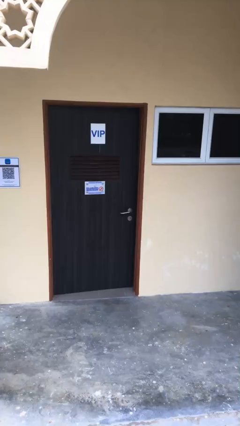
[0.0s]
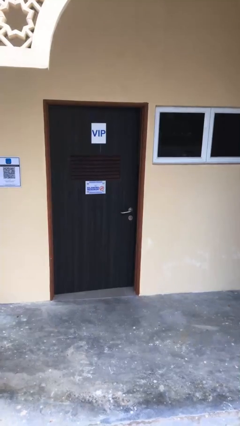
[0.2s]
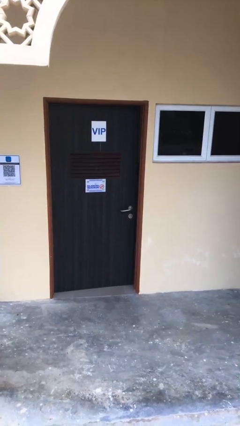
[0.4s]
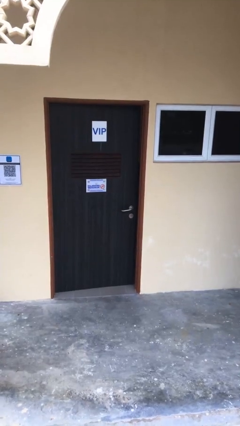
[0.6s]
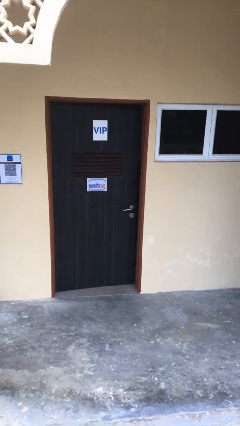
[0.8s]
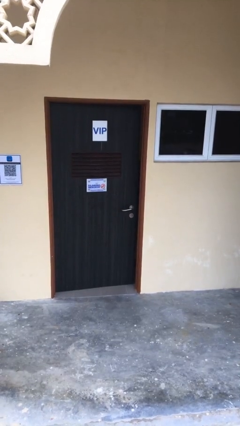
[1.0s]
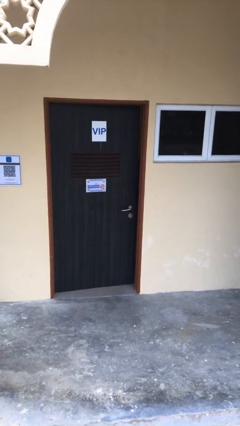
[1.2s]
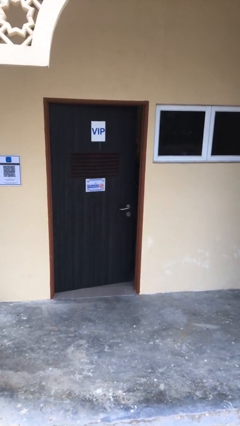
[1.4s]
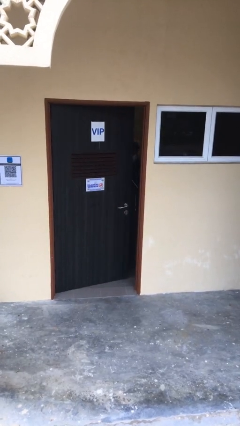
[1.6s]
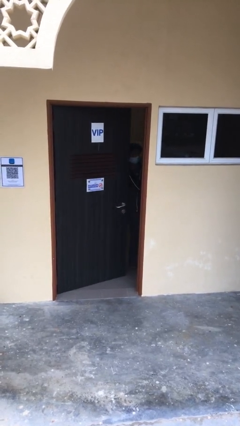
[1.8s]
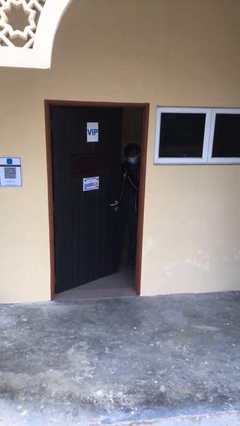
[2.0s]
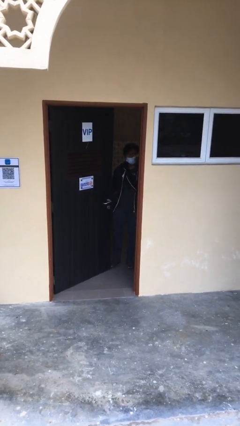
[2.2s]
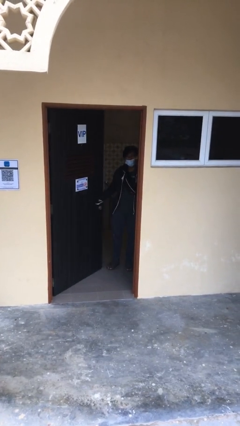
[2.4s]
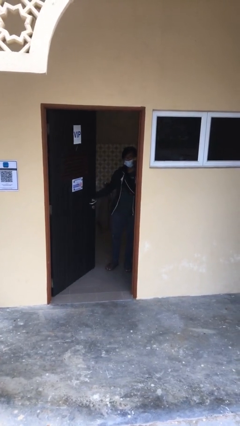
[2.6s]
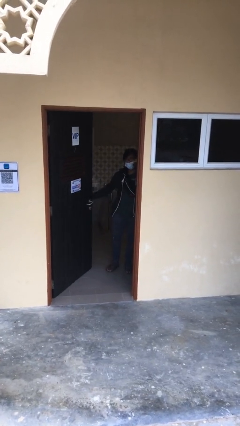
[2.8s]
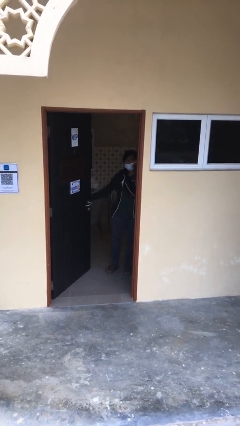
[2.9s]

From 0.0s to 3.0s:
person opens facility door

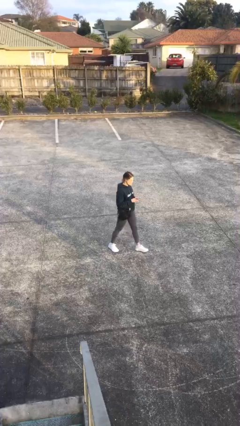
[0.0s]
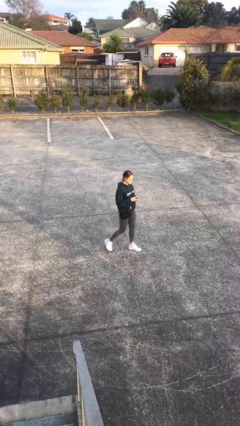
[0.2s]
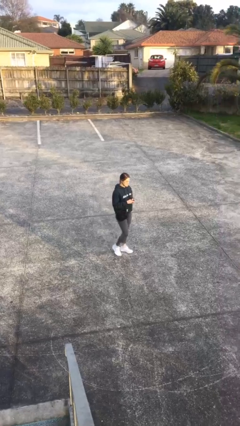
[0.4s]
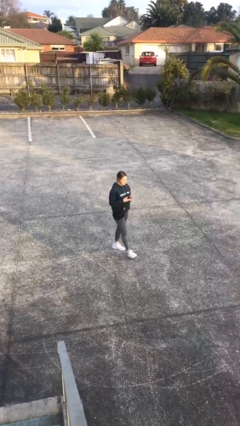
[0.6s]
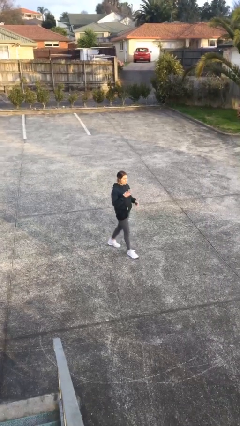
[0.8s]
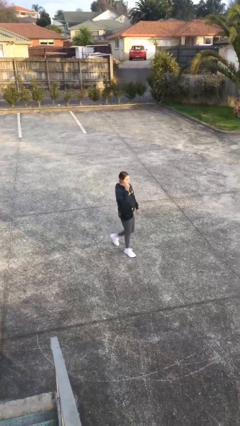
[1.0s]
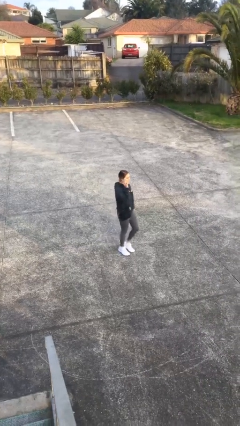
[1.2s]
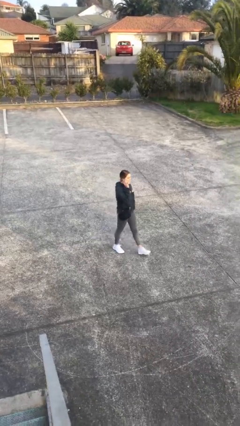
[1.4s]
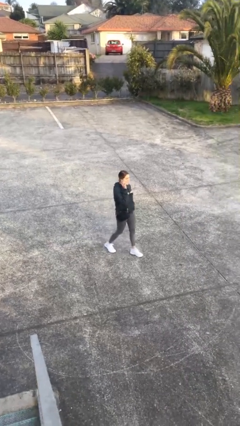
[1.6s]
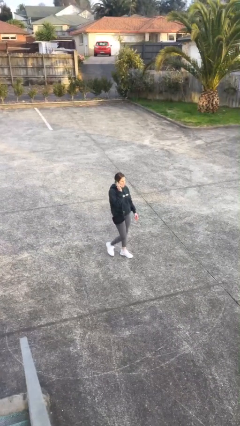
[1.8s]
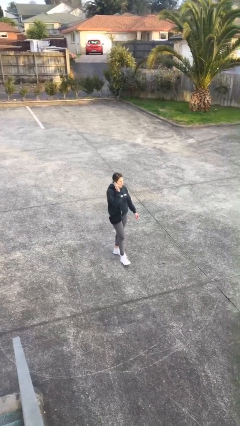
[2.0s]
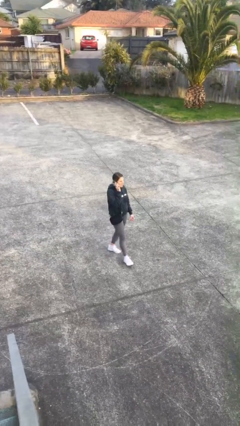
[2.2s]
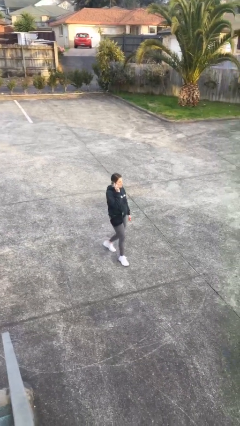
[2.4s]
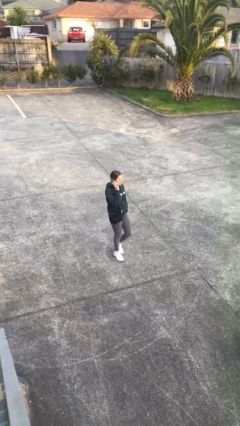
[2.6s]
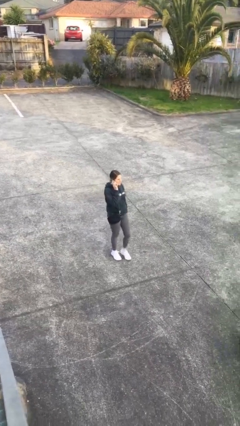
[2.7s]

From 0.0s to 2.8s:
person talks on phone

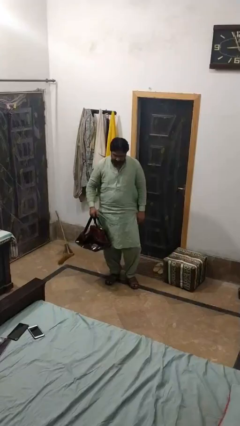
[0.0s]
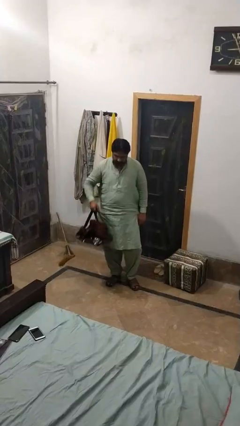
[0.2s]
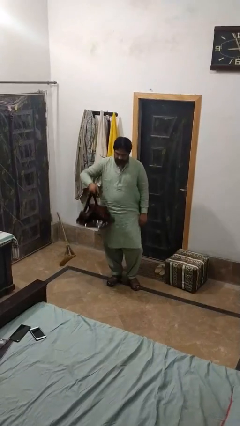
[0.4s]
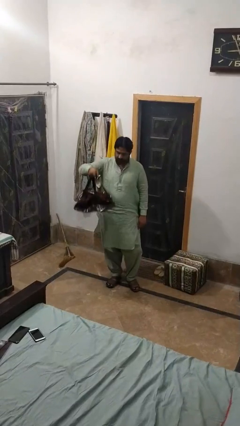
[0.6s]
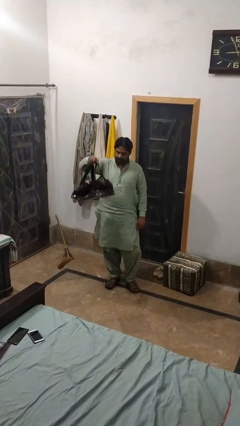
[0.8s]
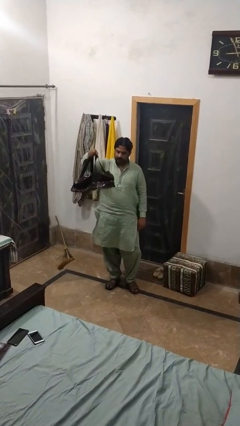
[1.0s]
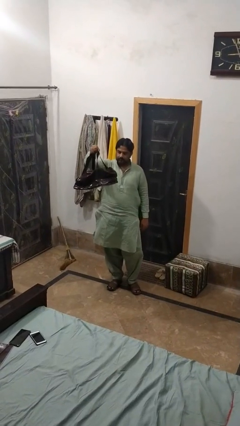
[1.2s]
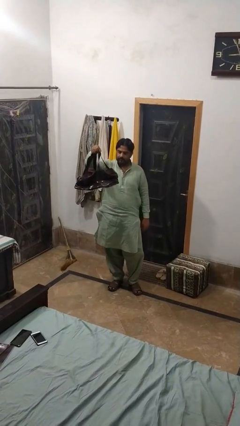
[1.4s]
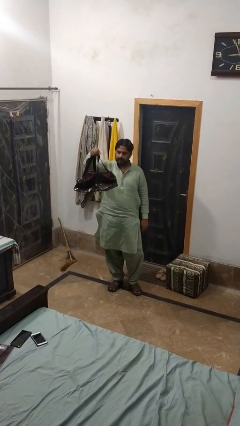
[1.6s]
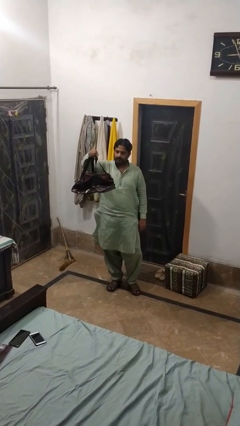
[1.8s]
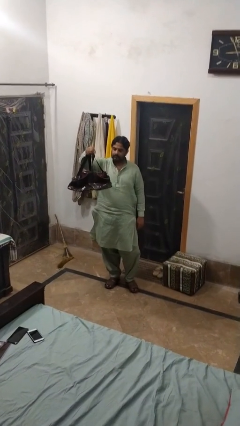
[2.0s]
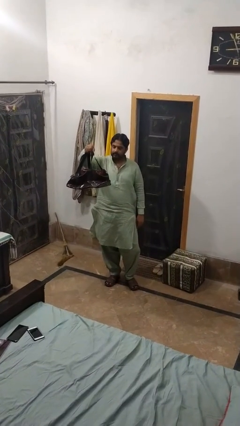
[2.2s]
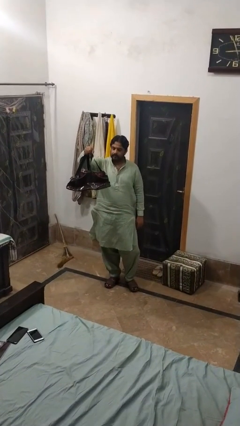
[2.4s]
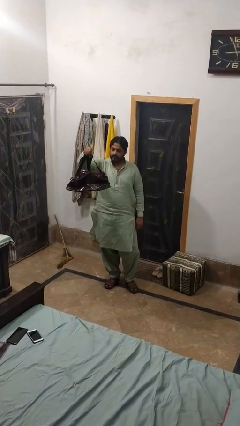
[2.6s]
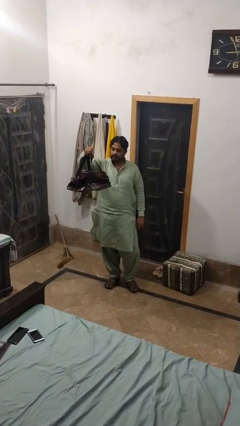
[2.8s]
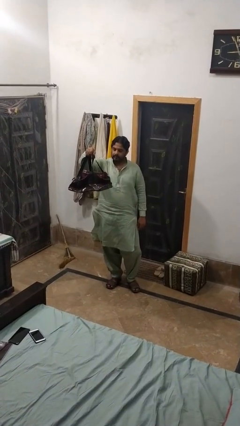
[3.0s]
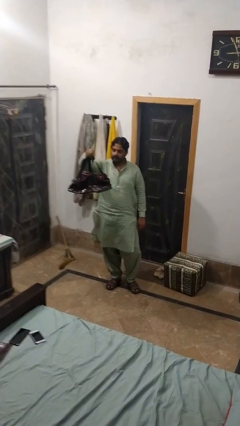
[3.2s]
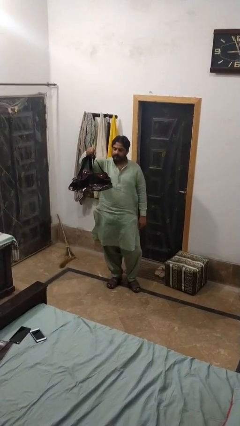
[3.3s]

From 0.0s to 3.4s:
person puts on backpack

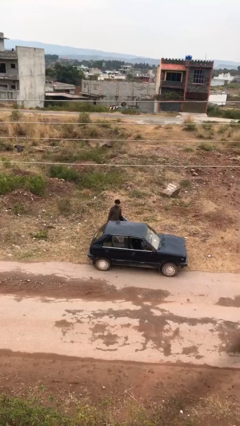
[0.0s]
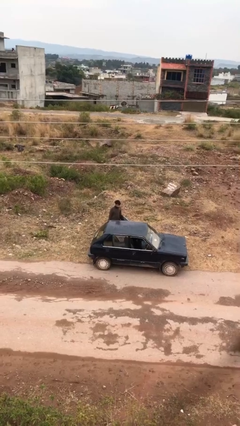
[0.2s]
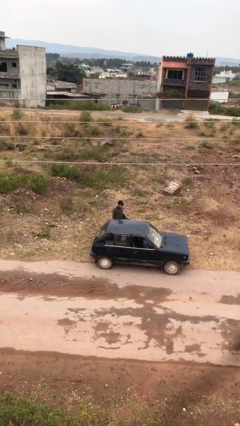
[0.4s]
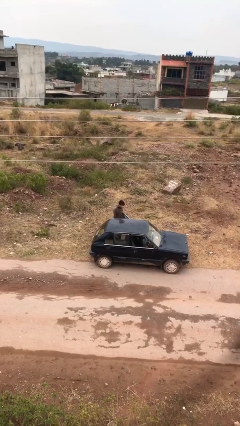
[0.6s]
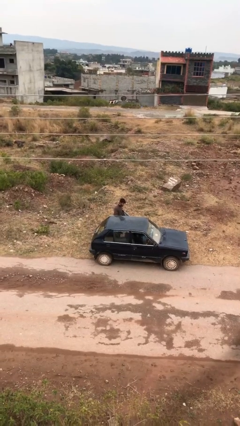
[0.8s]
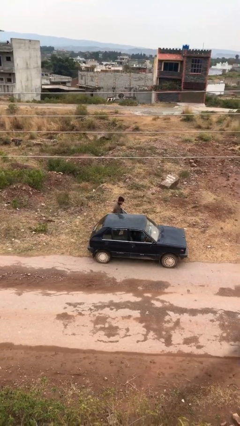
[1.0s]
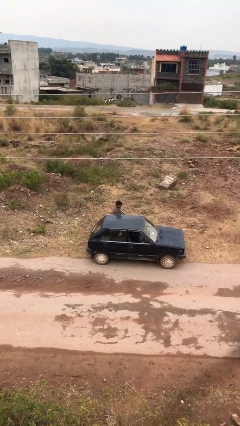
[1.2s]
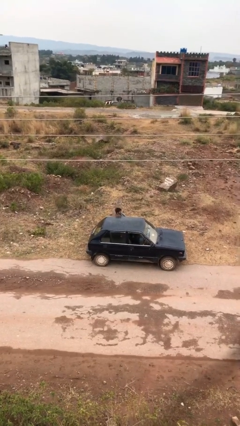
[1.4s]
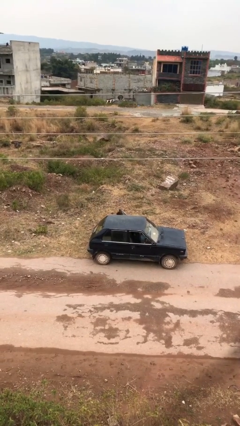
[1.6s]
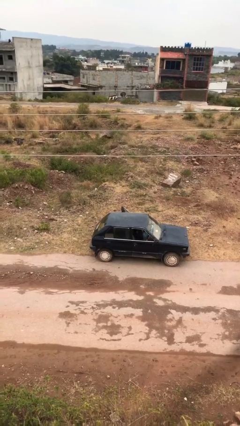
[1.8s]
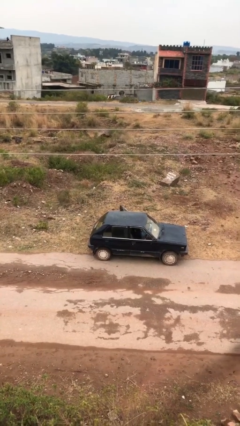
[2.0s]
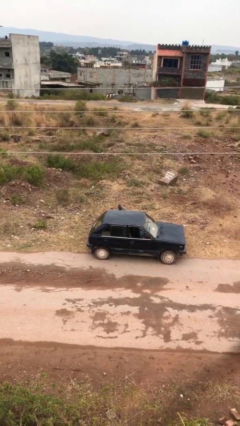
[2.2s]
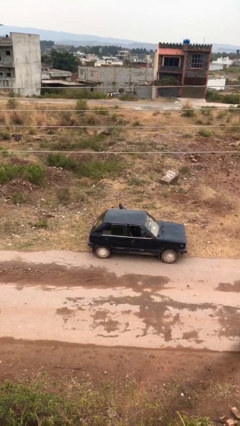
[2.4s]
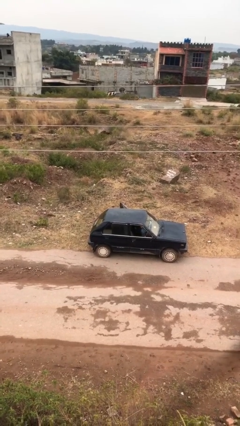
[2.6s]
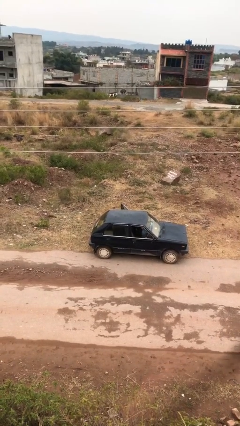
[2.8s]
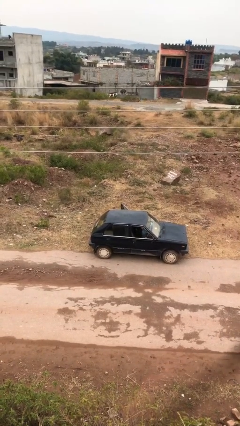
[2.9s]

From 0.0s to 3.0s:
person enters car

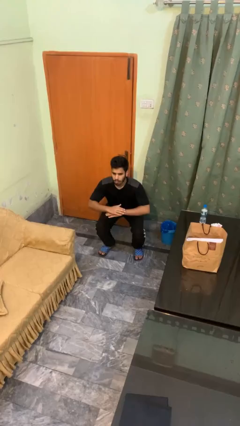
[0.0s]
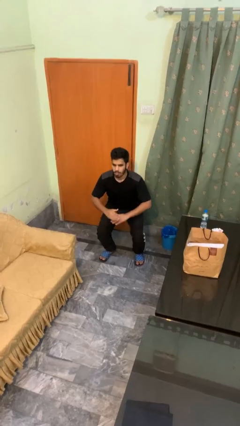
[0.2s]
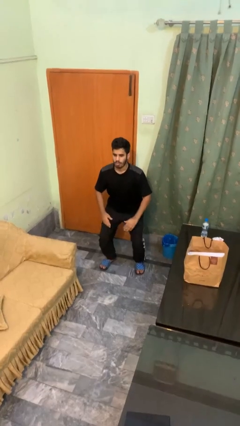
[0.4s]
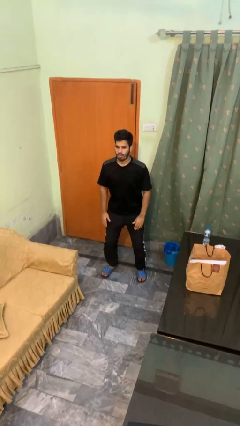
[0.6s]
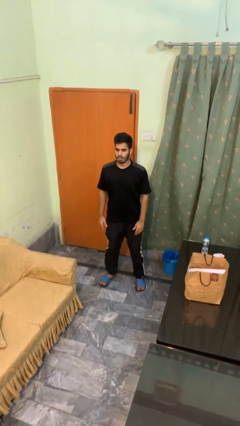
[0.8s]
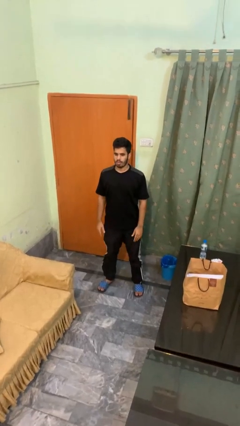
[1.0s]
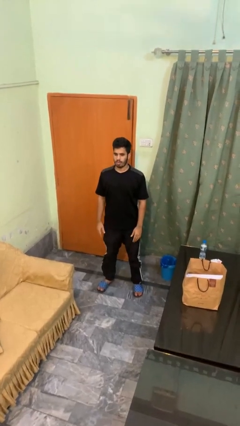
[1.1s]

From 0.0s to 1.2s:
person stands up

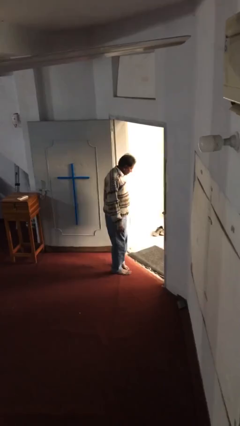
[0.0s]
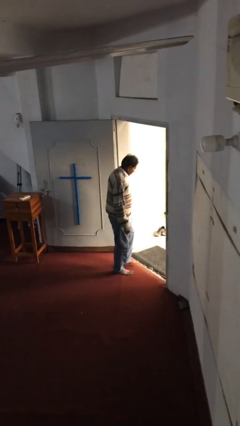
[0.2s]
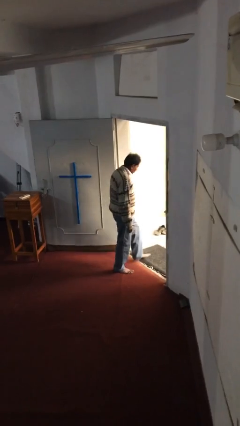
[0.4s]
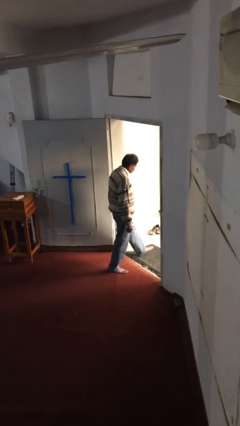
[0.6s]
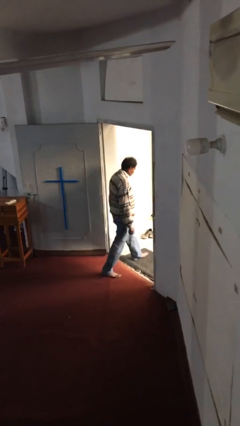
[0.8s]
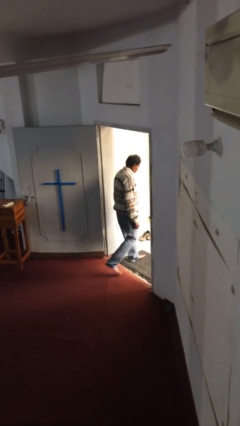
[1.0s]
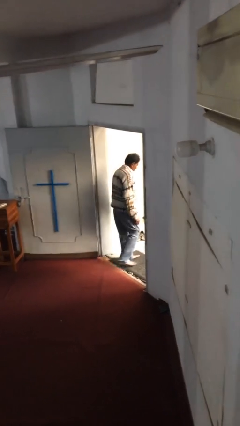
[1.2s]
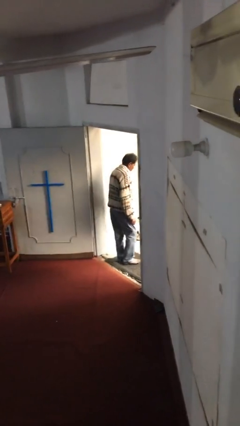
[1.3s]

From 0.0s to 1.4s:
person exits scene through structure

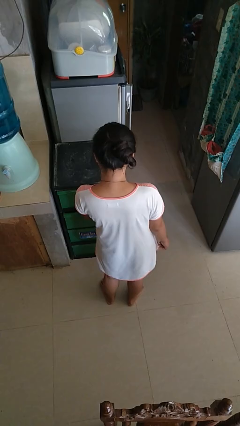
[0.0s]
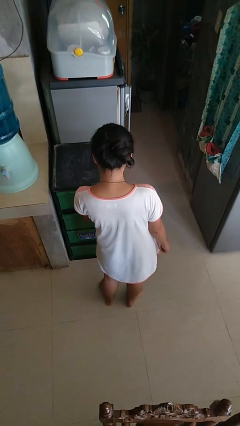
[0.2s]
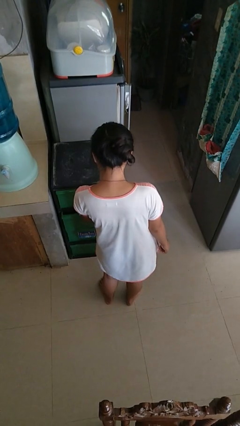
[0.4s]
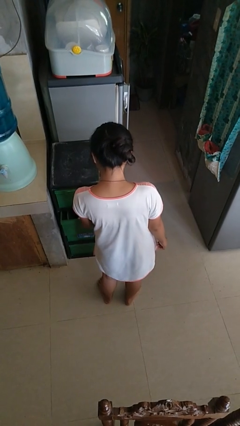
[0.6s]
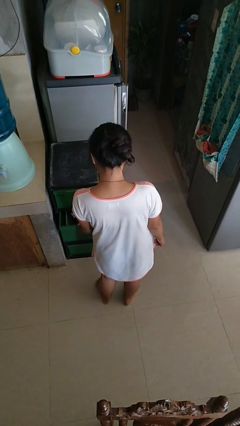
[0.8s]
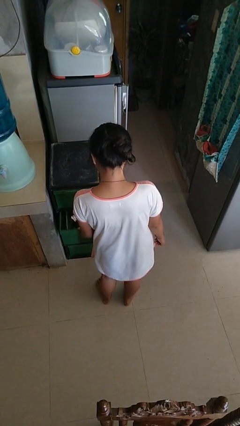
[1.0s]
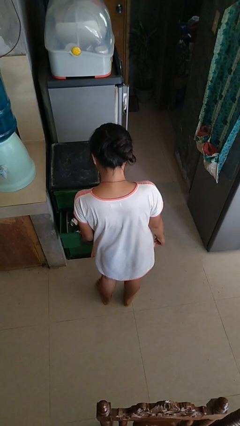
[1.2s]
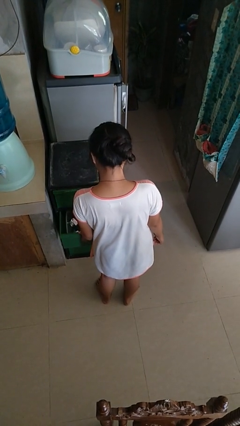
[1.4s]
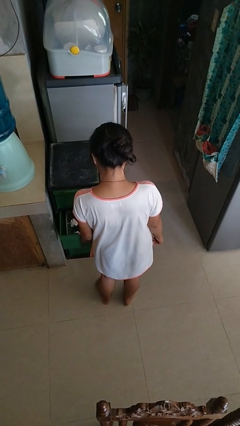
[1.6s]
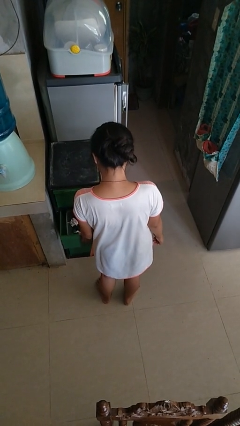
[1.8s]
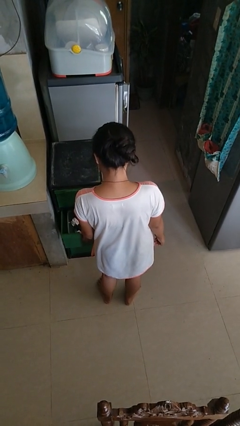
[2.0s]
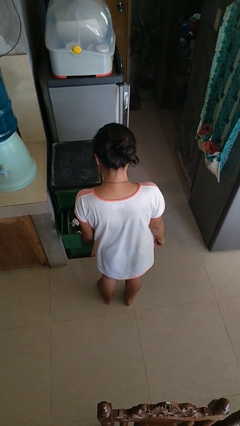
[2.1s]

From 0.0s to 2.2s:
person opens kitchen drawer

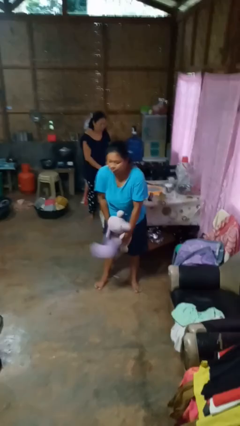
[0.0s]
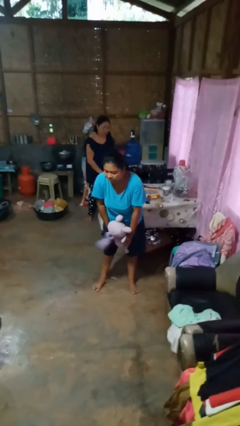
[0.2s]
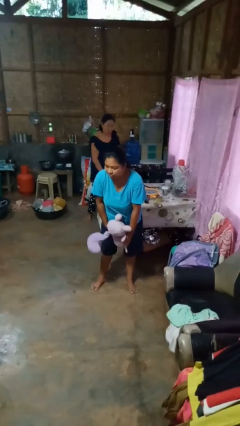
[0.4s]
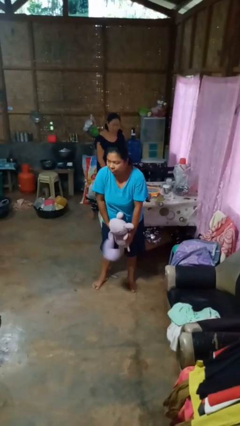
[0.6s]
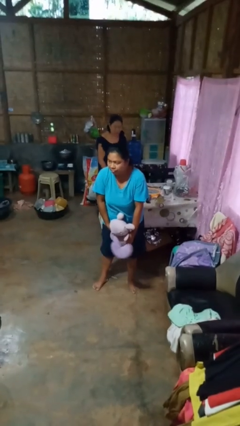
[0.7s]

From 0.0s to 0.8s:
person catches dropped object
